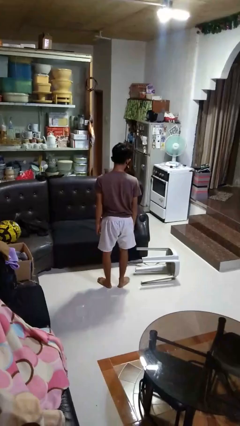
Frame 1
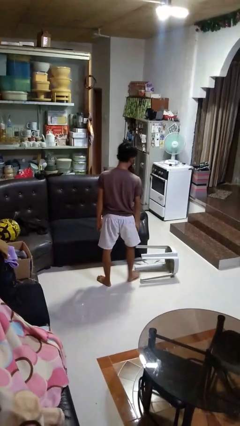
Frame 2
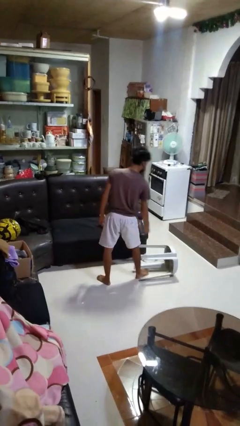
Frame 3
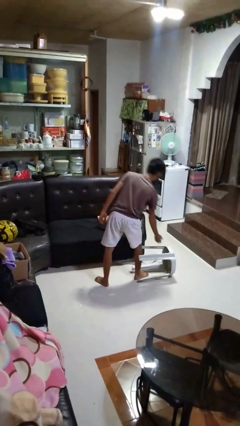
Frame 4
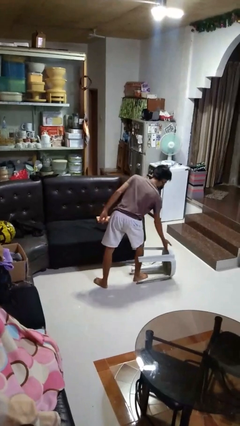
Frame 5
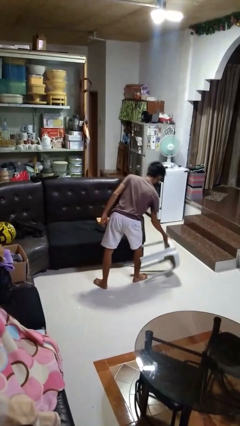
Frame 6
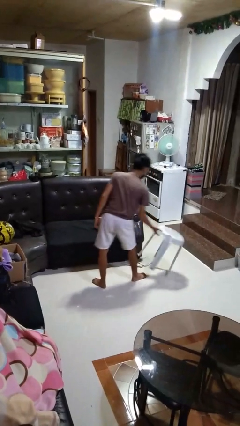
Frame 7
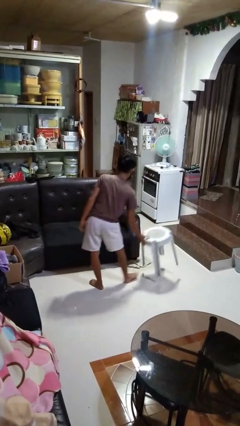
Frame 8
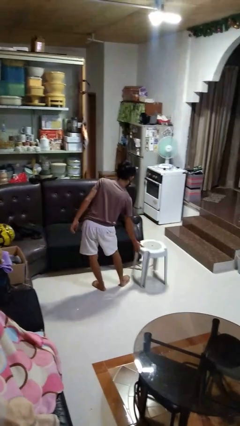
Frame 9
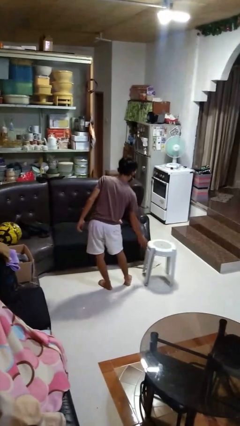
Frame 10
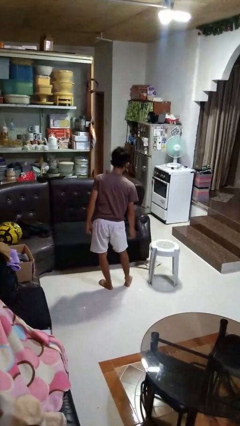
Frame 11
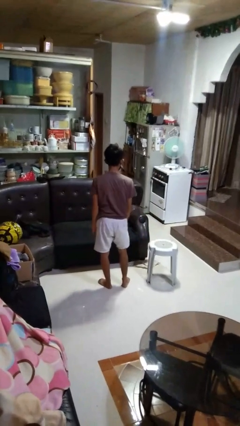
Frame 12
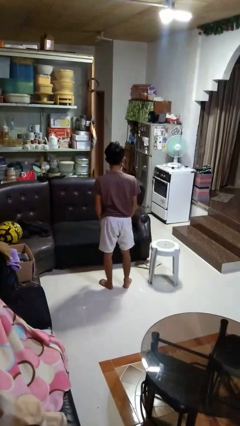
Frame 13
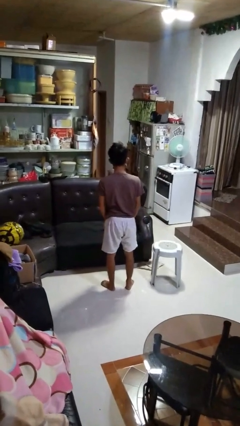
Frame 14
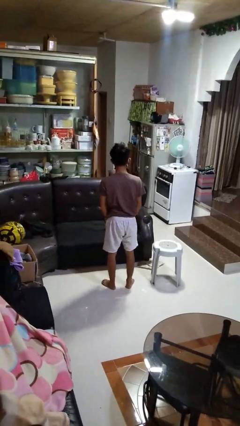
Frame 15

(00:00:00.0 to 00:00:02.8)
person sets upright furniture

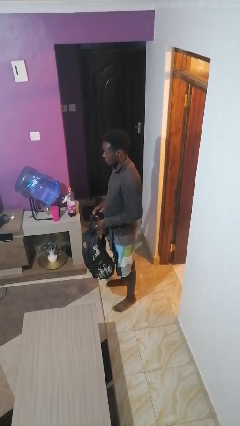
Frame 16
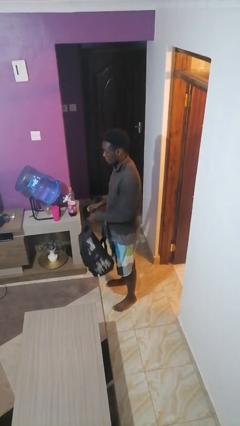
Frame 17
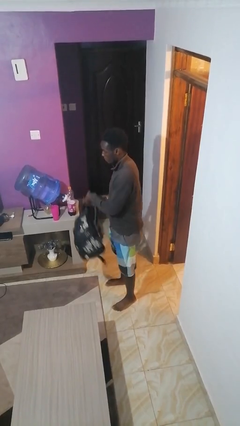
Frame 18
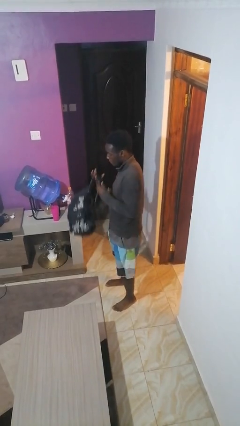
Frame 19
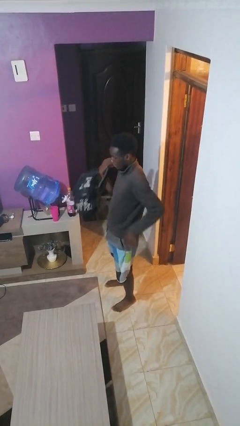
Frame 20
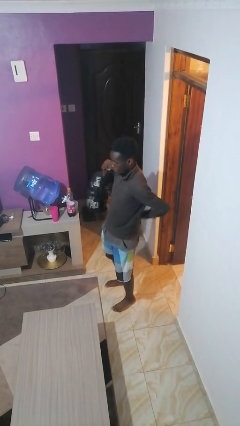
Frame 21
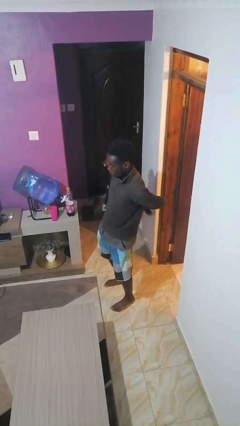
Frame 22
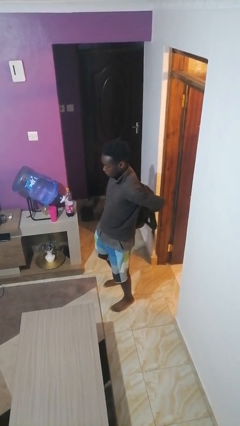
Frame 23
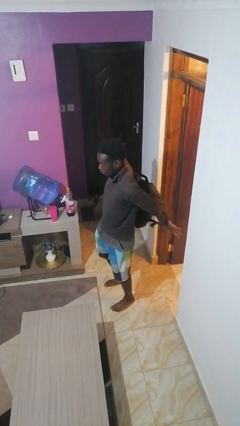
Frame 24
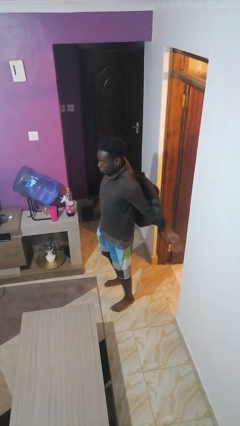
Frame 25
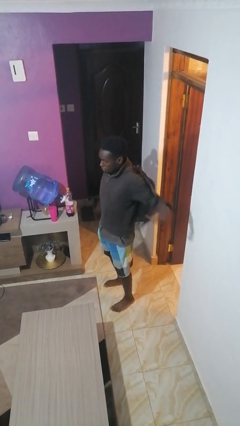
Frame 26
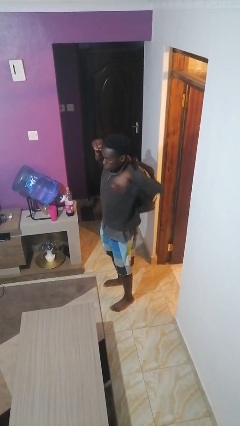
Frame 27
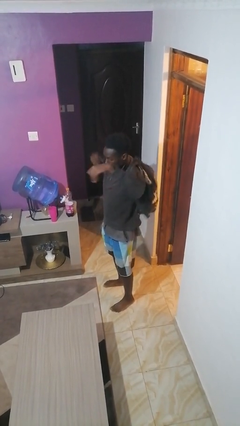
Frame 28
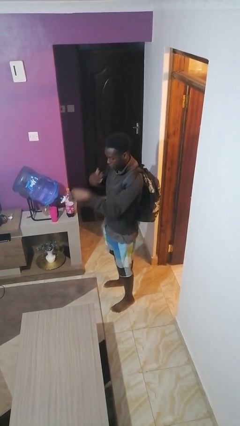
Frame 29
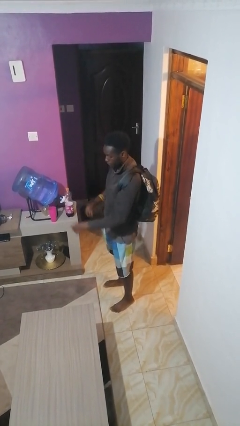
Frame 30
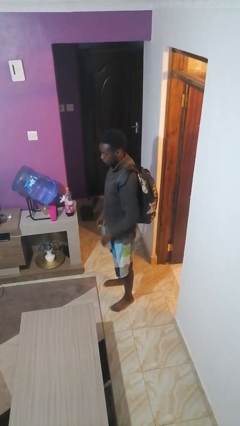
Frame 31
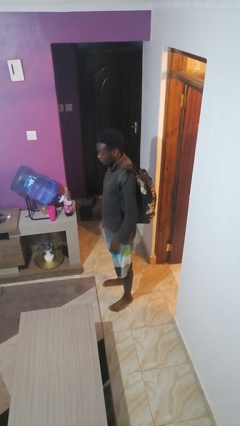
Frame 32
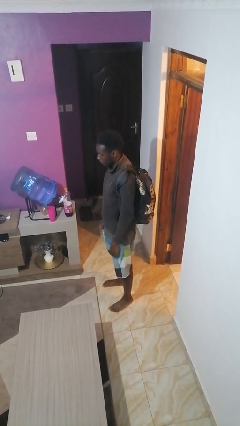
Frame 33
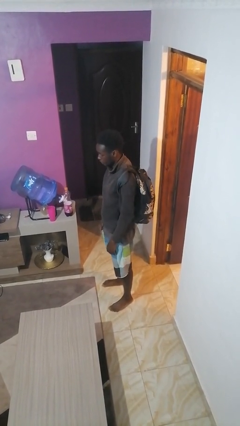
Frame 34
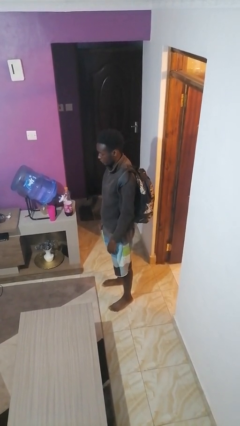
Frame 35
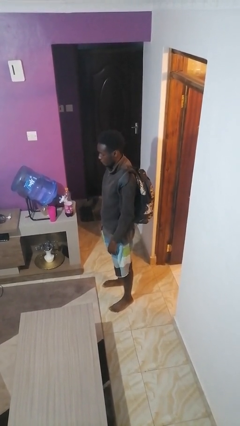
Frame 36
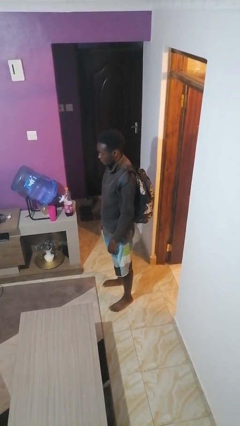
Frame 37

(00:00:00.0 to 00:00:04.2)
person puts on backpack

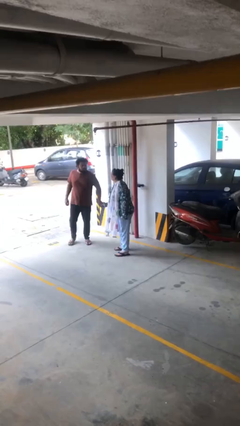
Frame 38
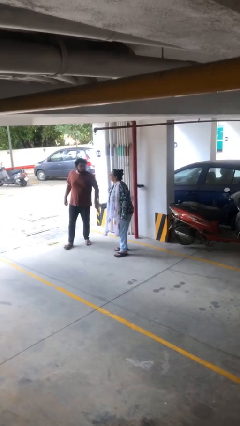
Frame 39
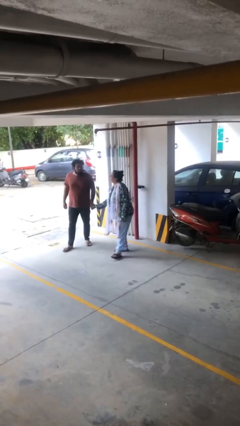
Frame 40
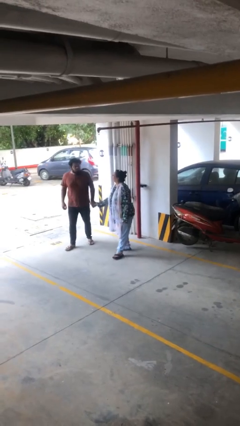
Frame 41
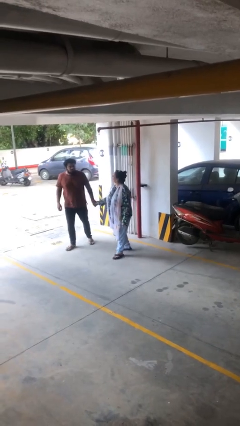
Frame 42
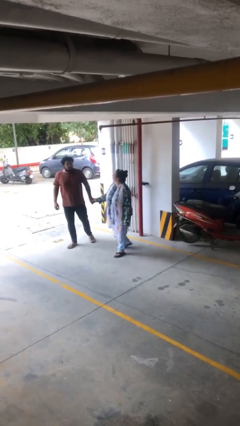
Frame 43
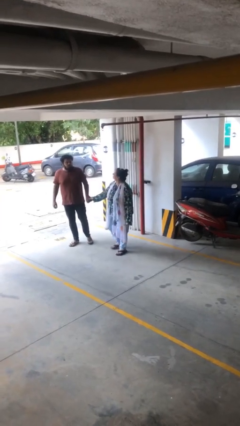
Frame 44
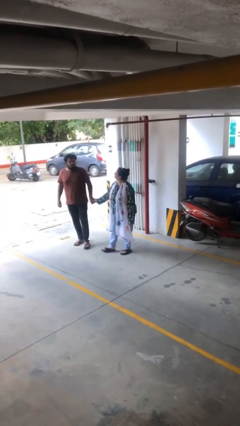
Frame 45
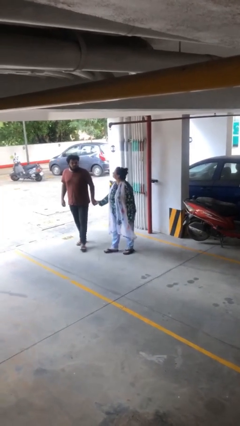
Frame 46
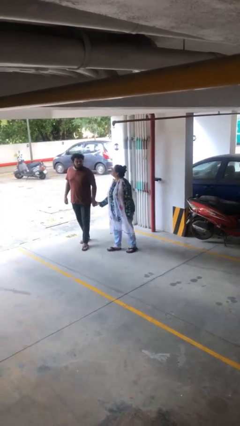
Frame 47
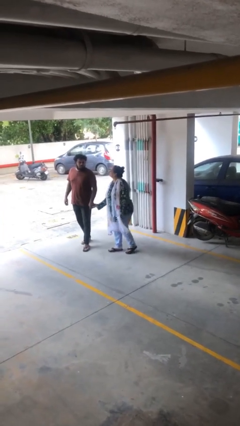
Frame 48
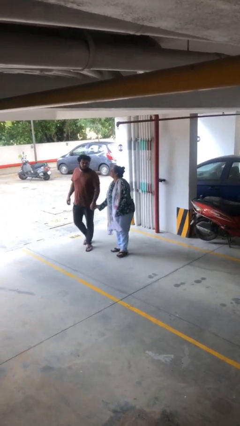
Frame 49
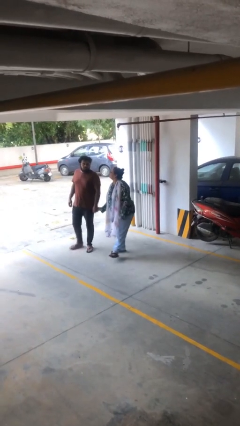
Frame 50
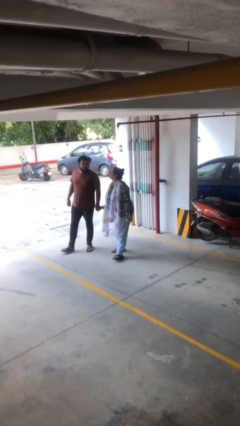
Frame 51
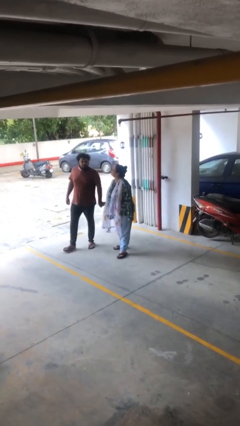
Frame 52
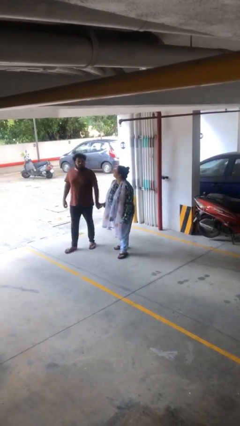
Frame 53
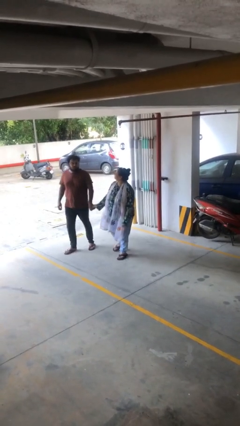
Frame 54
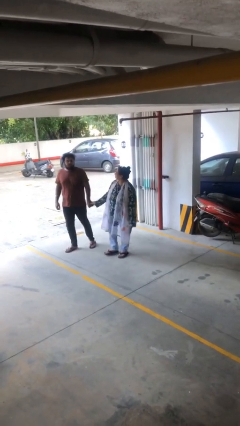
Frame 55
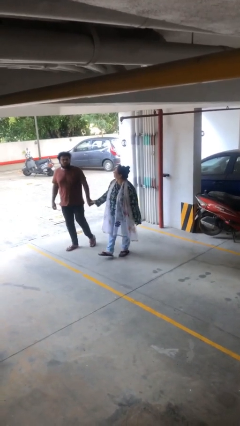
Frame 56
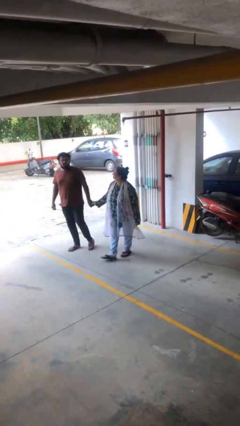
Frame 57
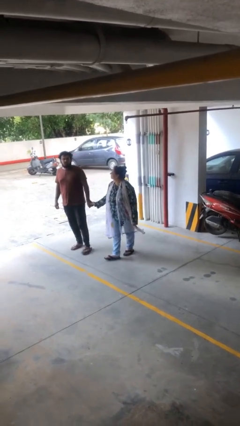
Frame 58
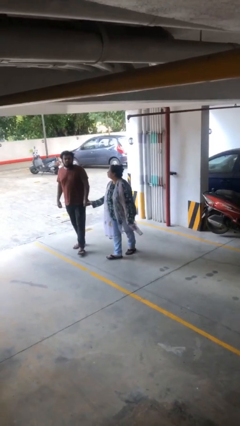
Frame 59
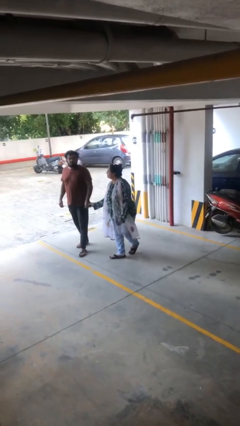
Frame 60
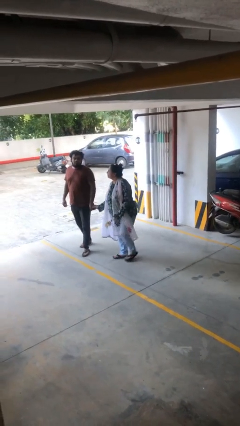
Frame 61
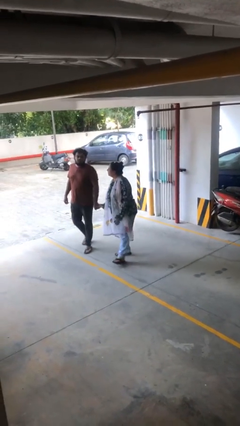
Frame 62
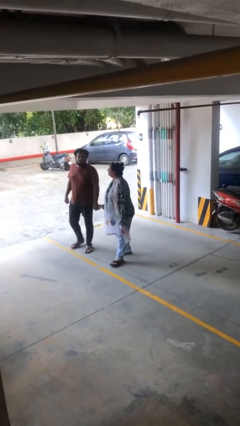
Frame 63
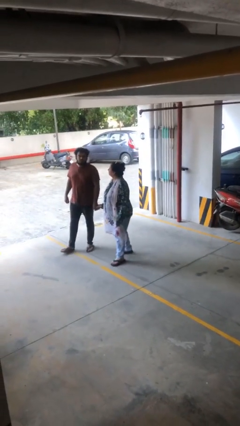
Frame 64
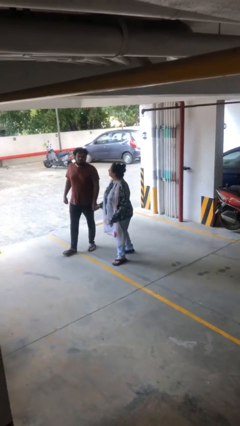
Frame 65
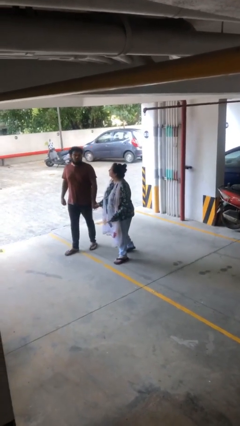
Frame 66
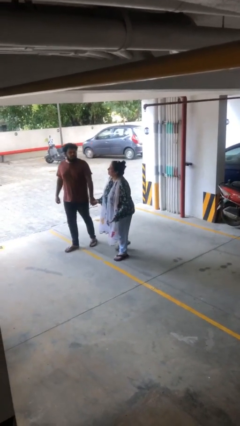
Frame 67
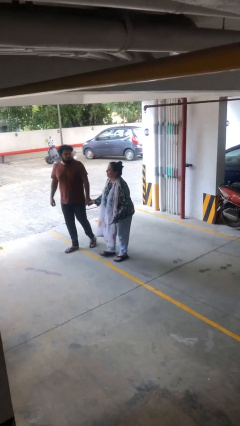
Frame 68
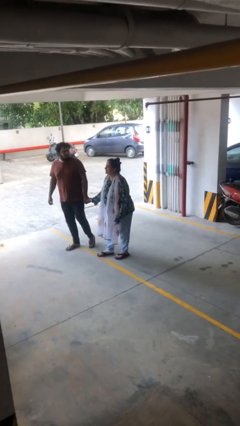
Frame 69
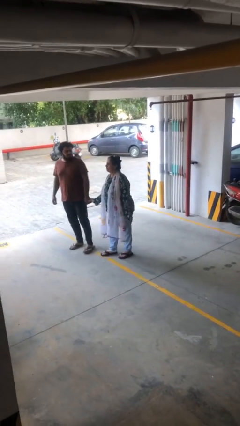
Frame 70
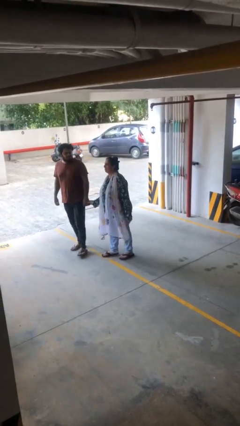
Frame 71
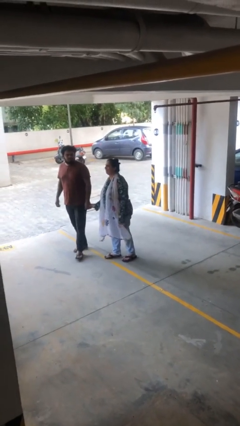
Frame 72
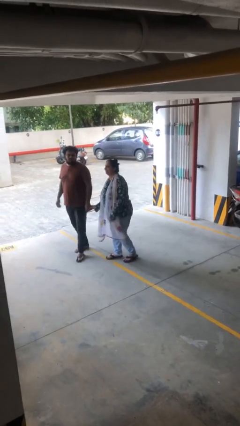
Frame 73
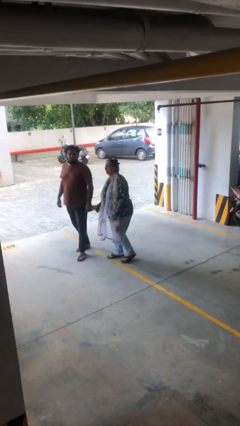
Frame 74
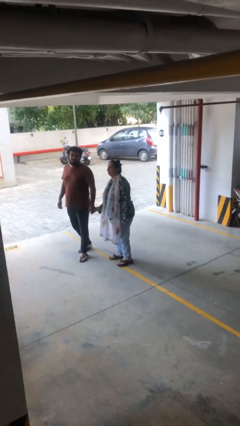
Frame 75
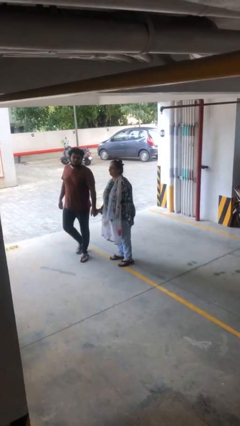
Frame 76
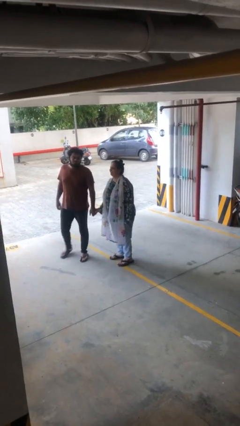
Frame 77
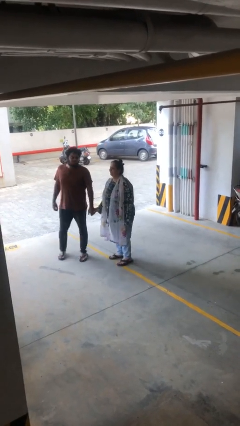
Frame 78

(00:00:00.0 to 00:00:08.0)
person holds hand

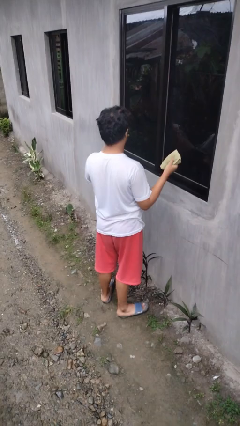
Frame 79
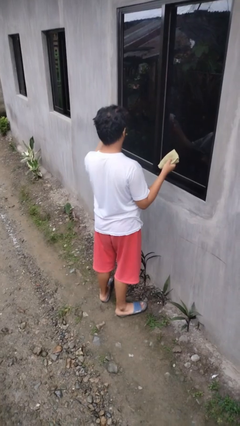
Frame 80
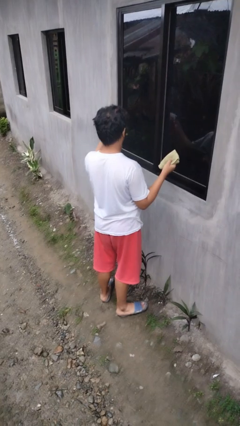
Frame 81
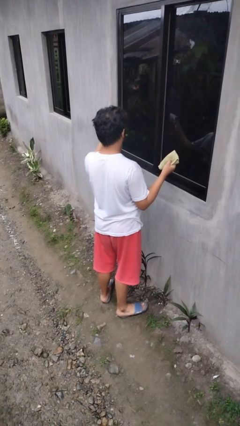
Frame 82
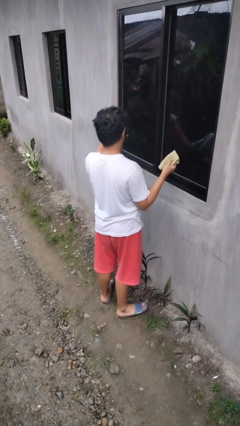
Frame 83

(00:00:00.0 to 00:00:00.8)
person sprays from bottle

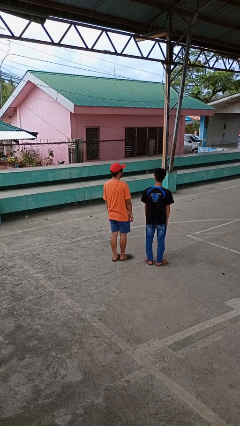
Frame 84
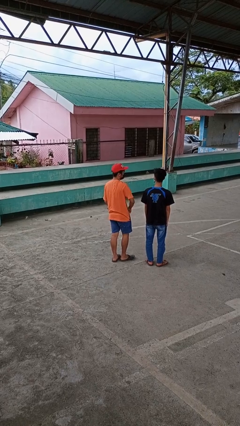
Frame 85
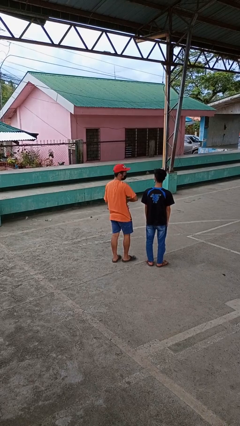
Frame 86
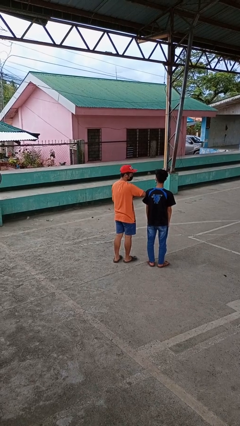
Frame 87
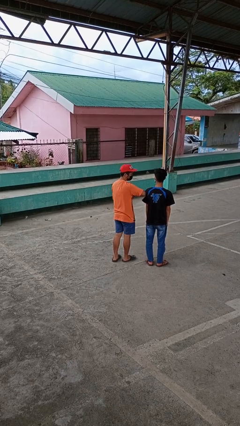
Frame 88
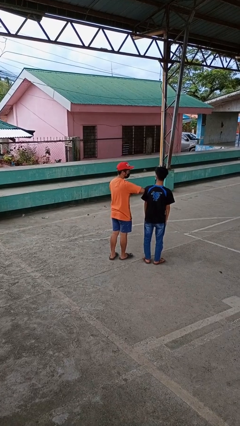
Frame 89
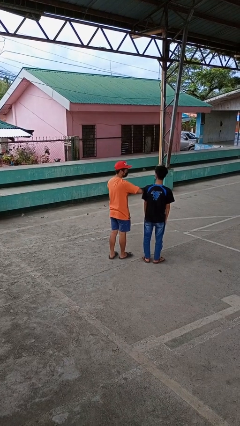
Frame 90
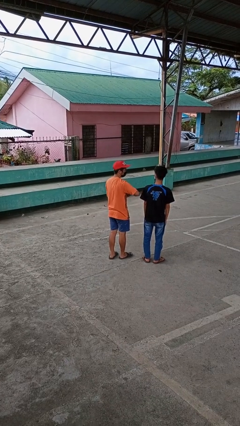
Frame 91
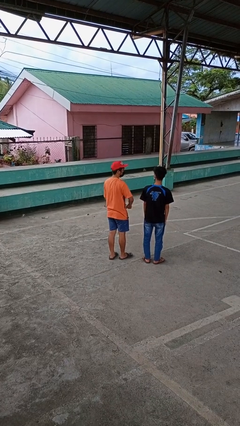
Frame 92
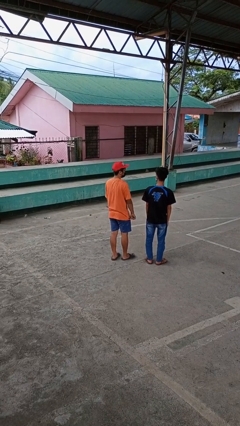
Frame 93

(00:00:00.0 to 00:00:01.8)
person nudges person with elbow

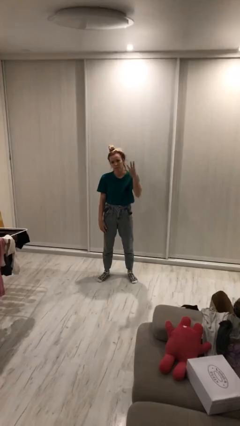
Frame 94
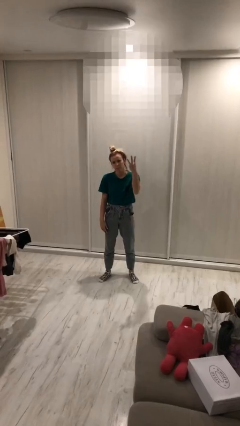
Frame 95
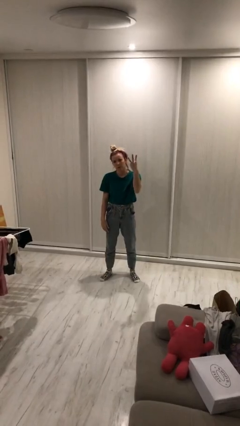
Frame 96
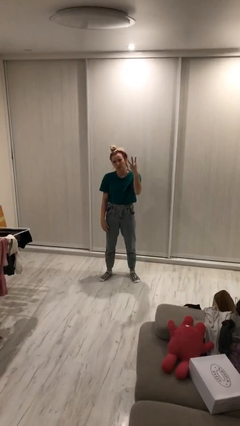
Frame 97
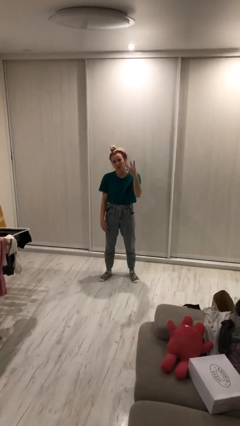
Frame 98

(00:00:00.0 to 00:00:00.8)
person gestures number three
